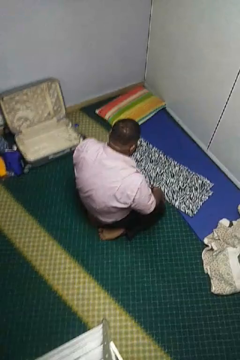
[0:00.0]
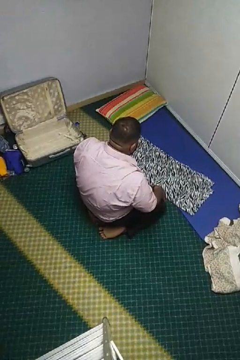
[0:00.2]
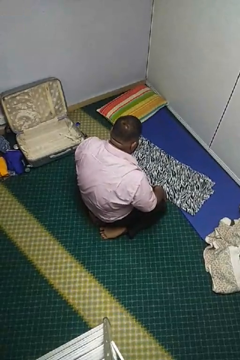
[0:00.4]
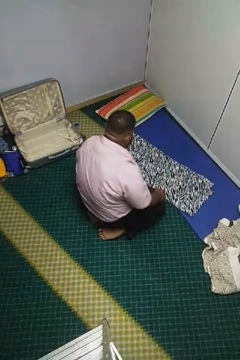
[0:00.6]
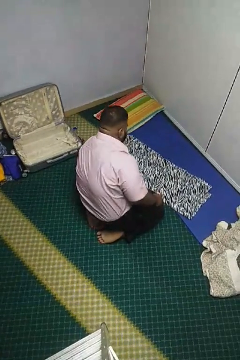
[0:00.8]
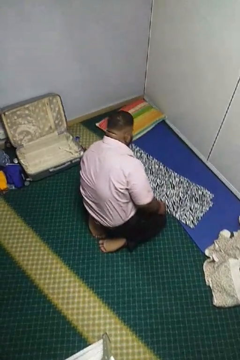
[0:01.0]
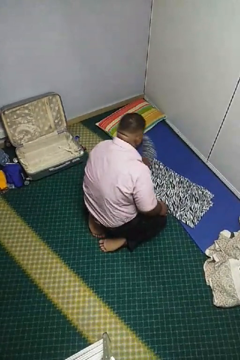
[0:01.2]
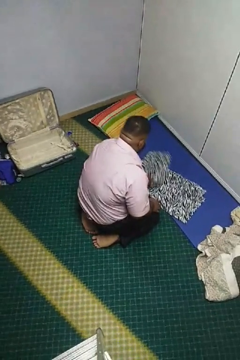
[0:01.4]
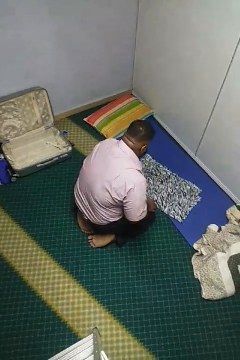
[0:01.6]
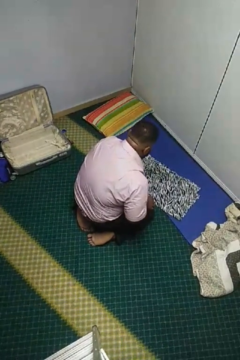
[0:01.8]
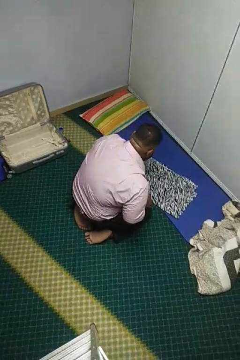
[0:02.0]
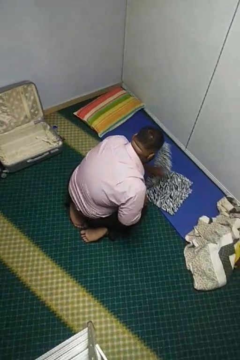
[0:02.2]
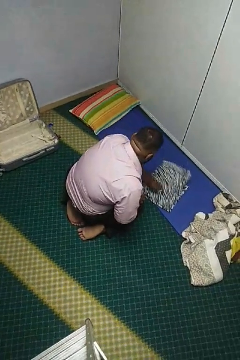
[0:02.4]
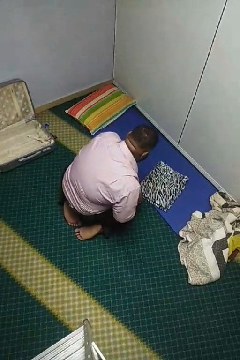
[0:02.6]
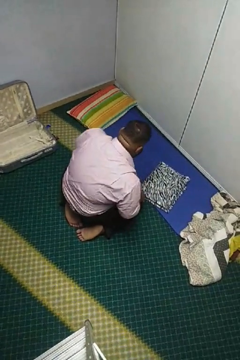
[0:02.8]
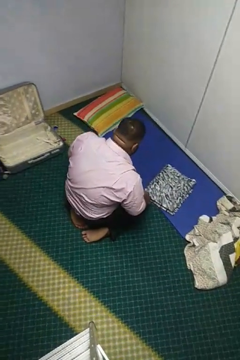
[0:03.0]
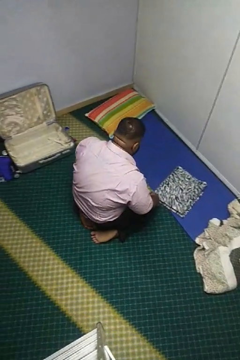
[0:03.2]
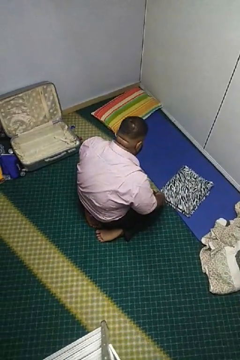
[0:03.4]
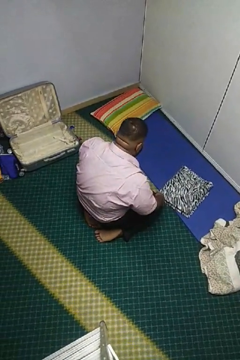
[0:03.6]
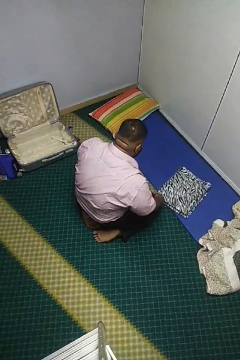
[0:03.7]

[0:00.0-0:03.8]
person folds blanket

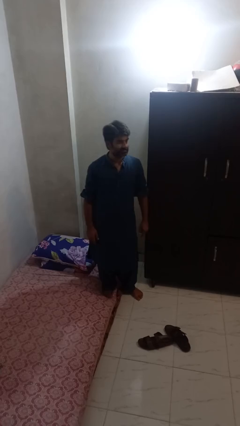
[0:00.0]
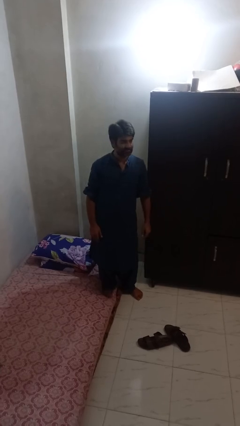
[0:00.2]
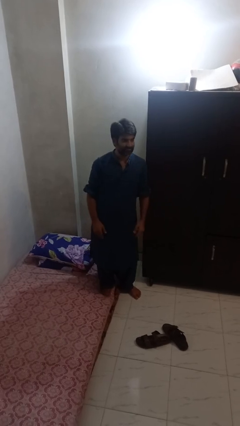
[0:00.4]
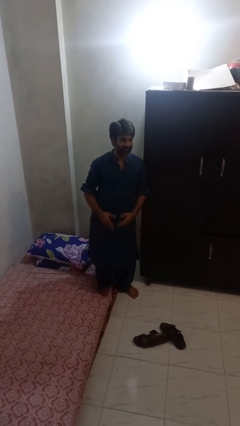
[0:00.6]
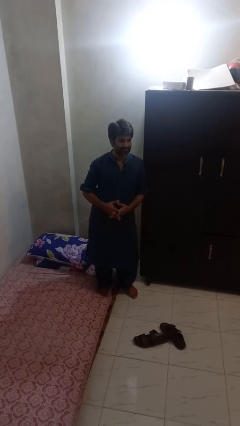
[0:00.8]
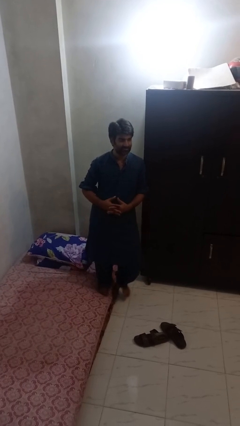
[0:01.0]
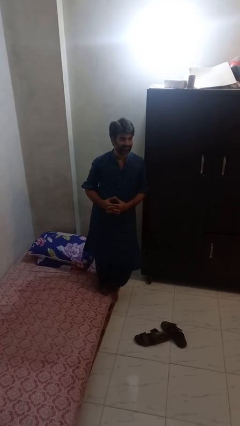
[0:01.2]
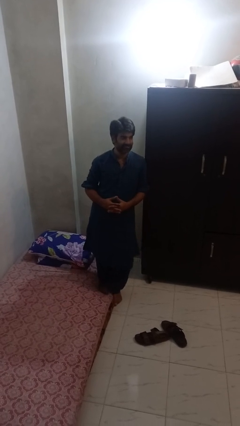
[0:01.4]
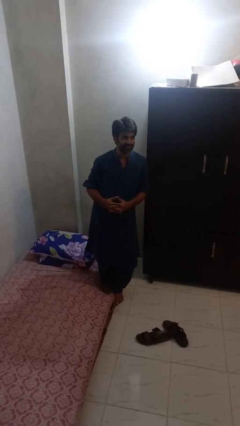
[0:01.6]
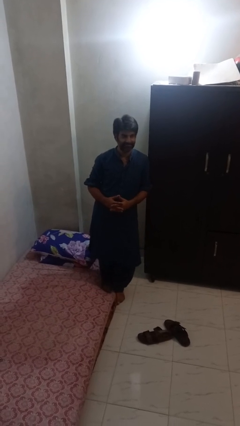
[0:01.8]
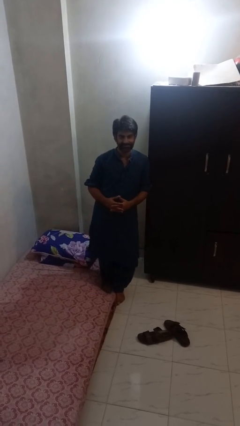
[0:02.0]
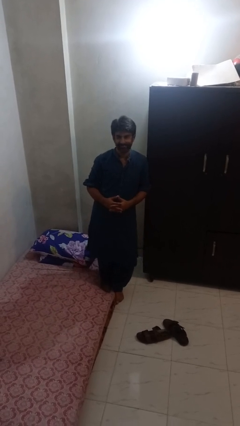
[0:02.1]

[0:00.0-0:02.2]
person gestures lower hand

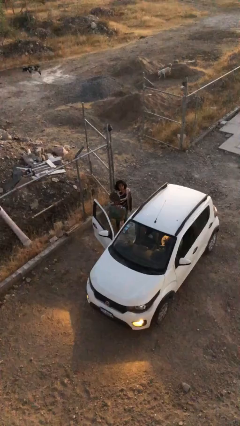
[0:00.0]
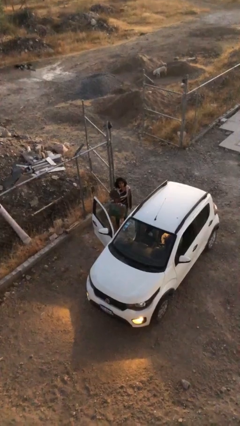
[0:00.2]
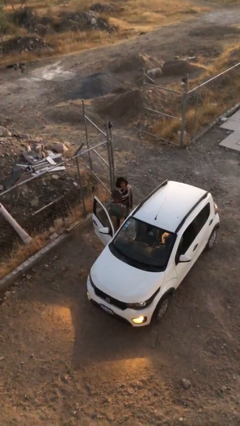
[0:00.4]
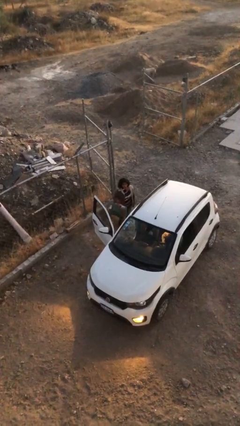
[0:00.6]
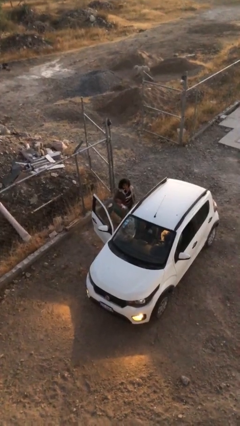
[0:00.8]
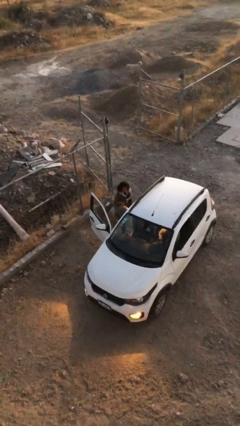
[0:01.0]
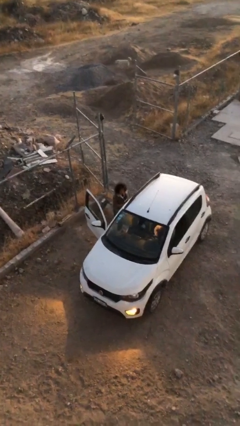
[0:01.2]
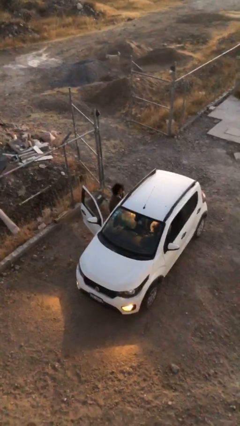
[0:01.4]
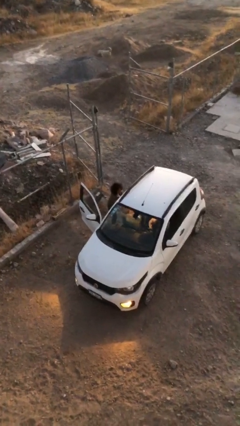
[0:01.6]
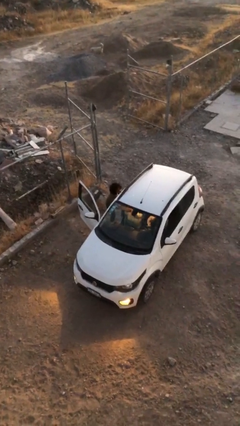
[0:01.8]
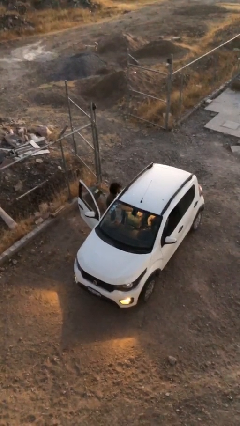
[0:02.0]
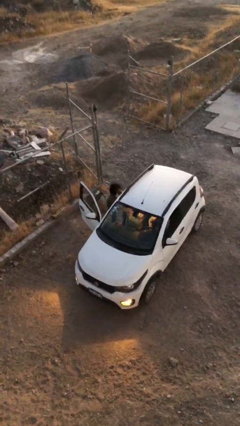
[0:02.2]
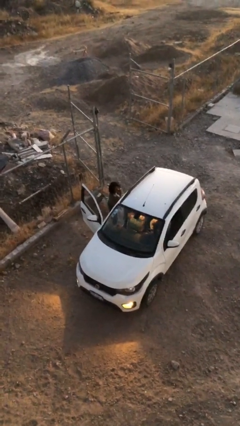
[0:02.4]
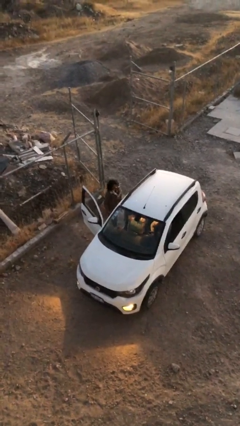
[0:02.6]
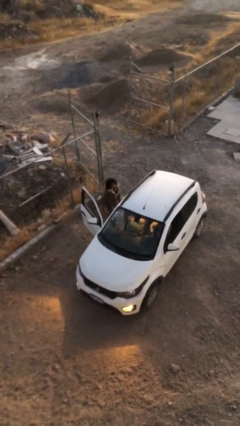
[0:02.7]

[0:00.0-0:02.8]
person loads car

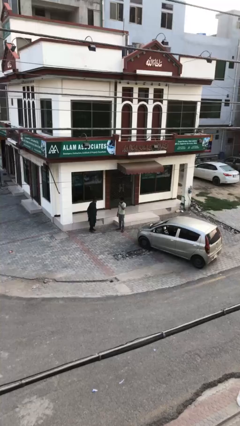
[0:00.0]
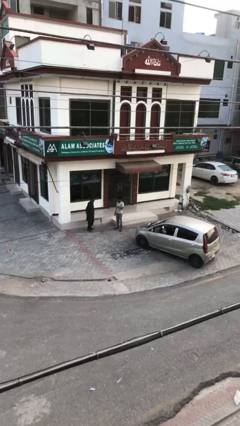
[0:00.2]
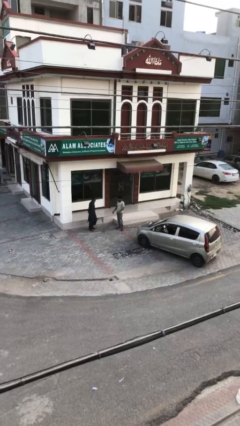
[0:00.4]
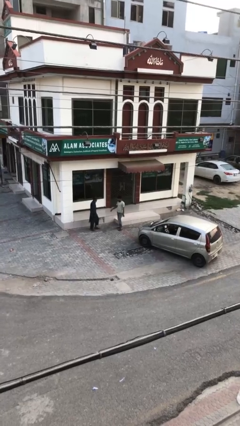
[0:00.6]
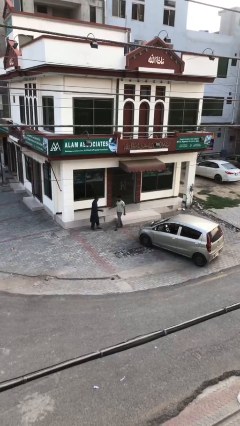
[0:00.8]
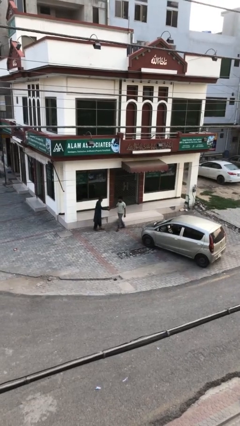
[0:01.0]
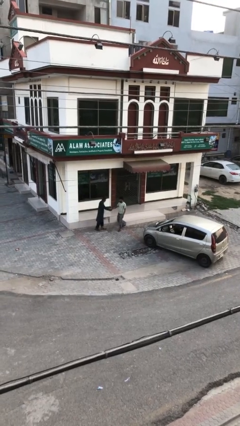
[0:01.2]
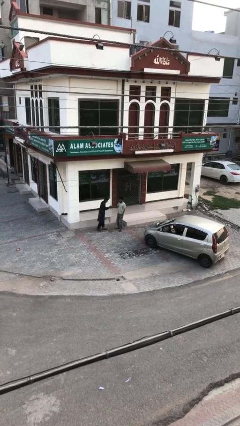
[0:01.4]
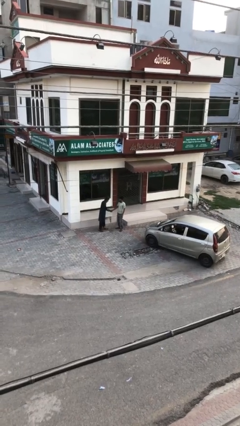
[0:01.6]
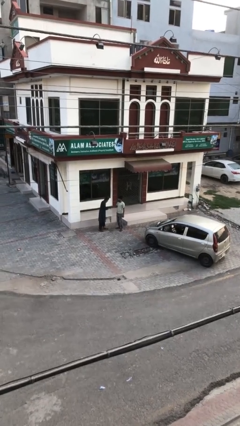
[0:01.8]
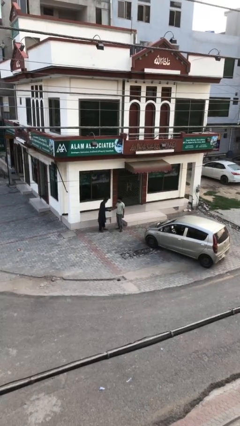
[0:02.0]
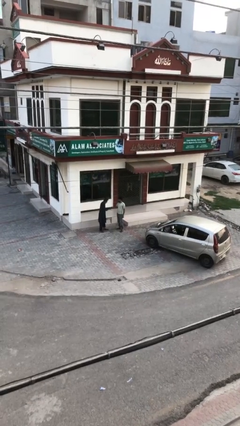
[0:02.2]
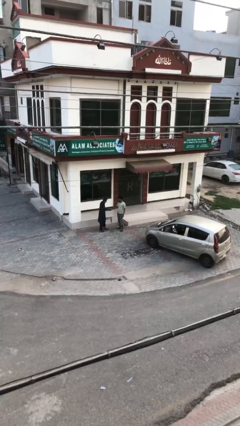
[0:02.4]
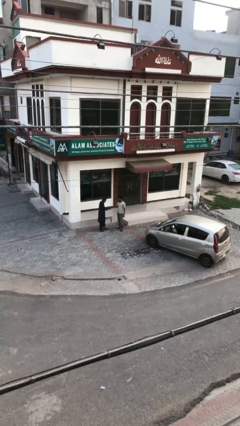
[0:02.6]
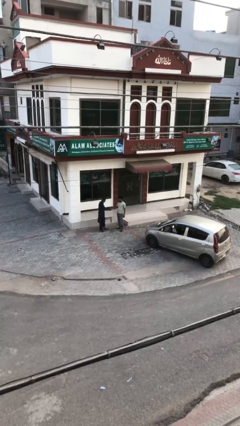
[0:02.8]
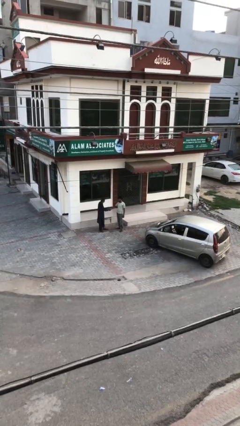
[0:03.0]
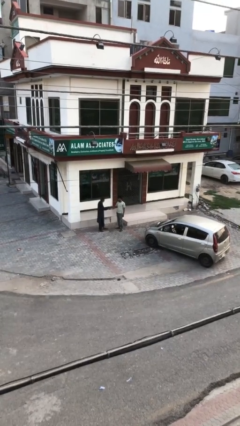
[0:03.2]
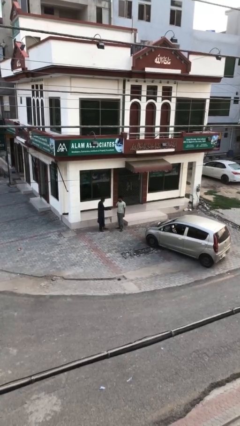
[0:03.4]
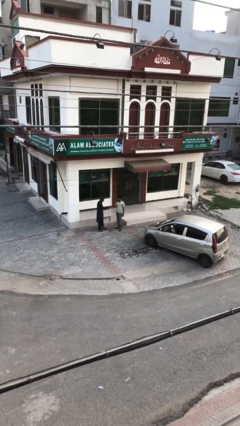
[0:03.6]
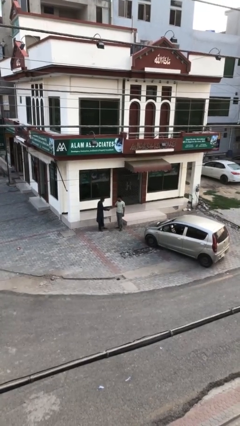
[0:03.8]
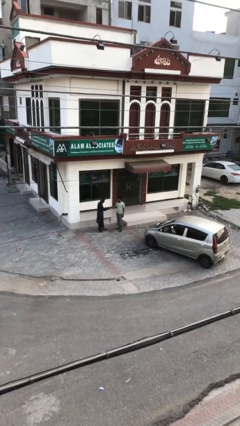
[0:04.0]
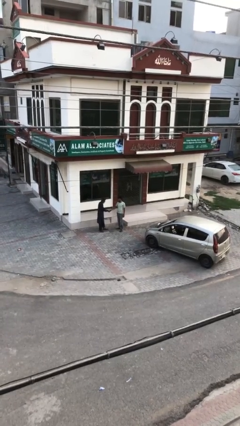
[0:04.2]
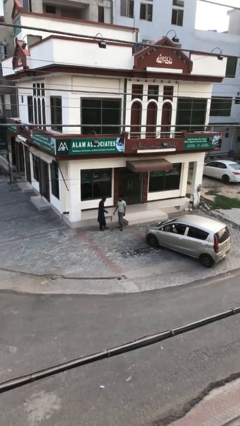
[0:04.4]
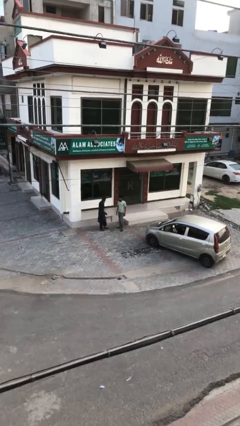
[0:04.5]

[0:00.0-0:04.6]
person shakes hand

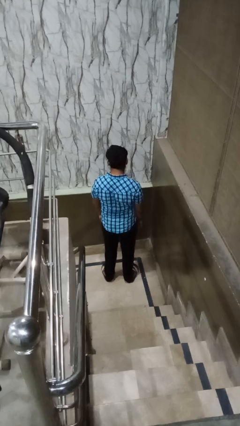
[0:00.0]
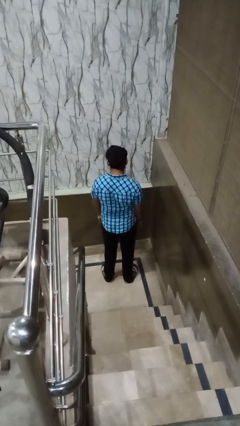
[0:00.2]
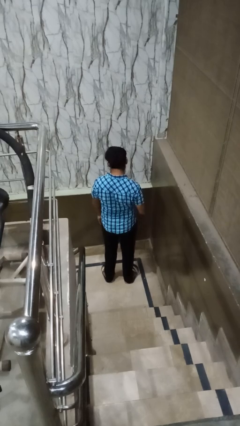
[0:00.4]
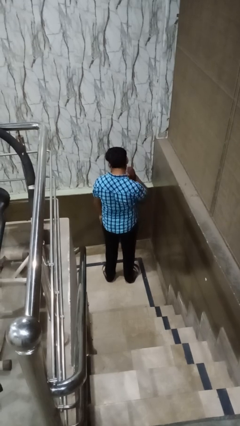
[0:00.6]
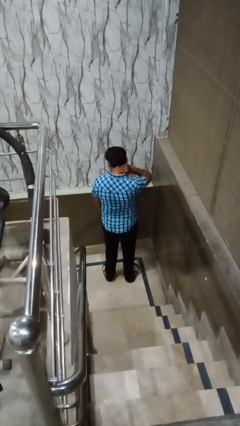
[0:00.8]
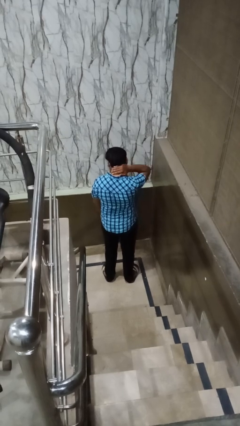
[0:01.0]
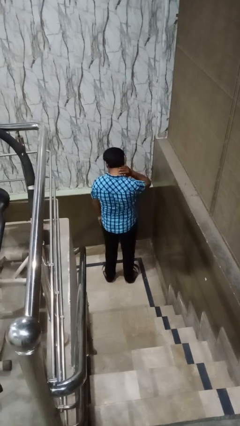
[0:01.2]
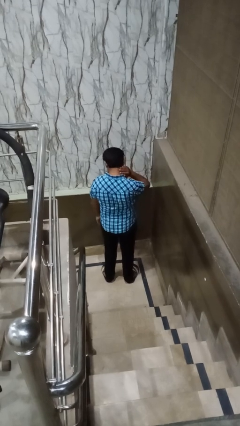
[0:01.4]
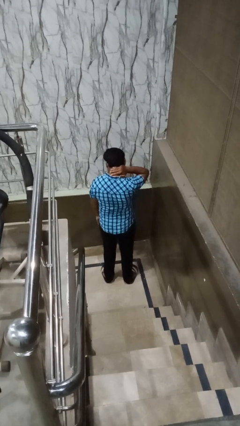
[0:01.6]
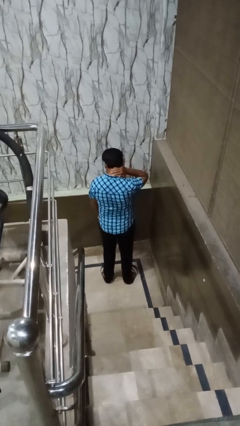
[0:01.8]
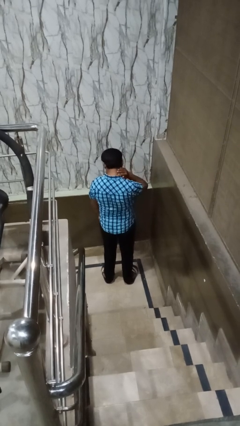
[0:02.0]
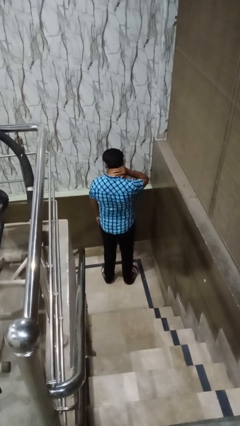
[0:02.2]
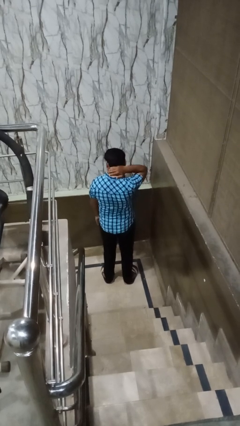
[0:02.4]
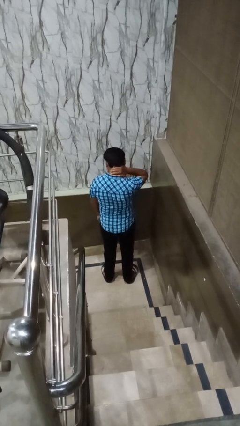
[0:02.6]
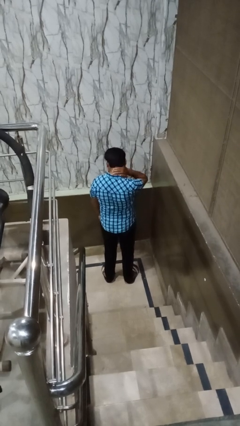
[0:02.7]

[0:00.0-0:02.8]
person rubs neck

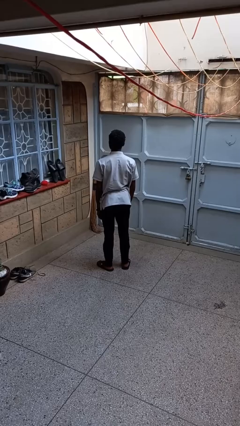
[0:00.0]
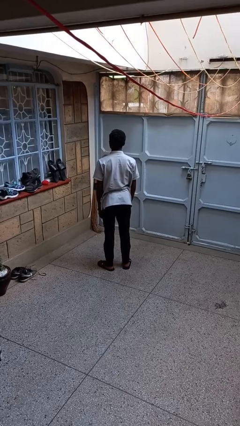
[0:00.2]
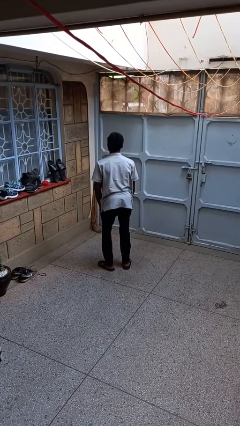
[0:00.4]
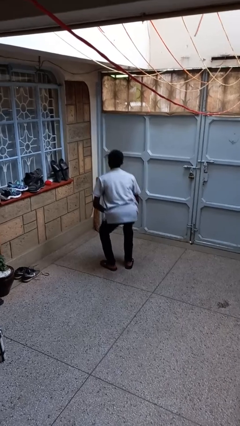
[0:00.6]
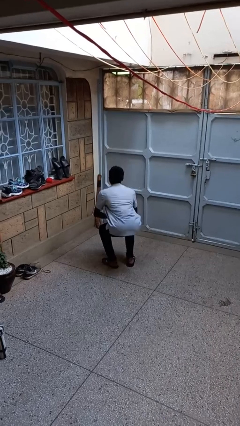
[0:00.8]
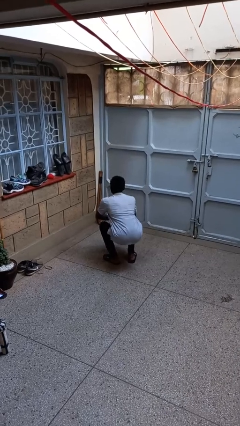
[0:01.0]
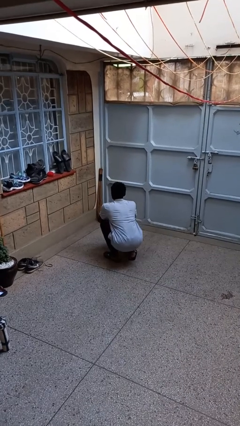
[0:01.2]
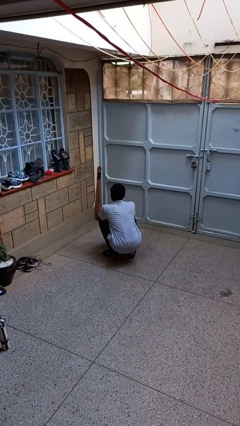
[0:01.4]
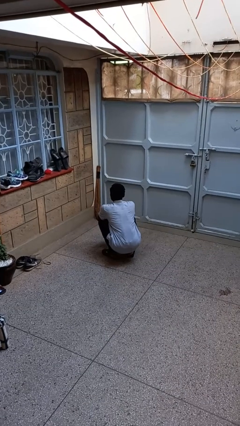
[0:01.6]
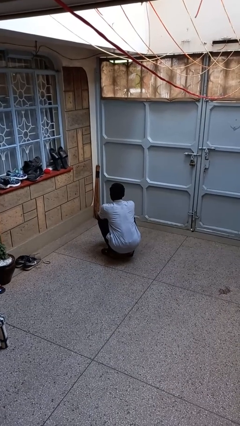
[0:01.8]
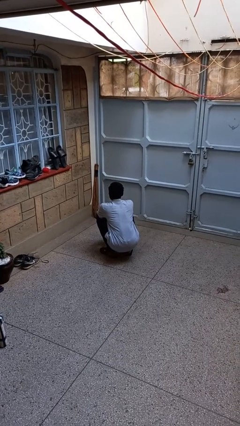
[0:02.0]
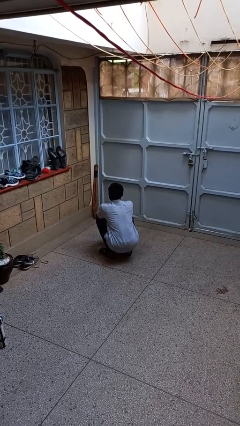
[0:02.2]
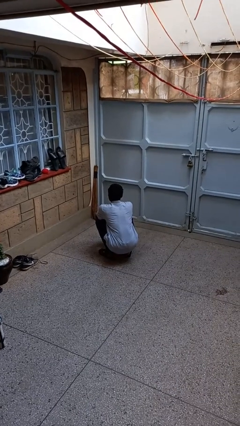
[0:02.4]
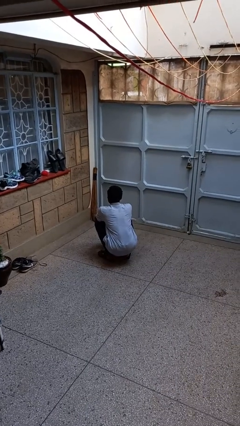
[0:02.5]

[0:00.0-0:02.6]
person squats
